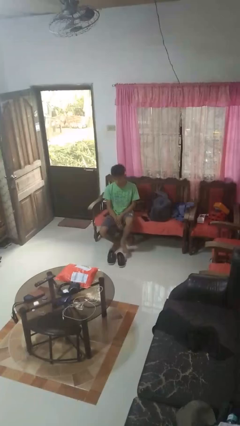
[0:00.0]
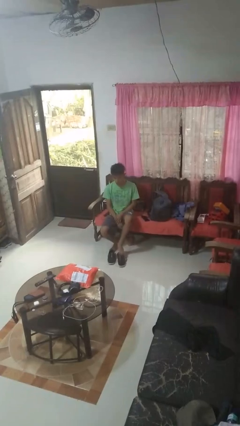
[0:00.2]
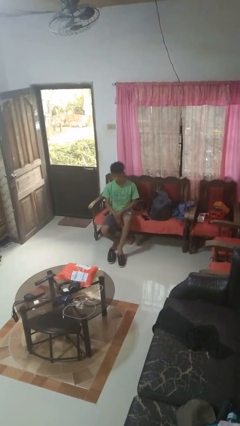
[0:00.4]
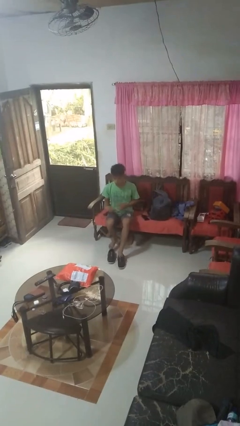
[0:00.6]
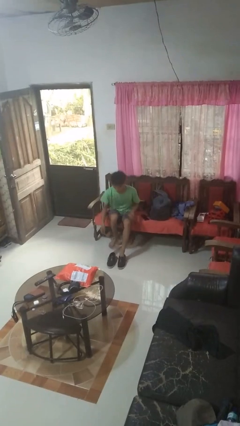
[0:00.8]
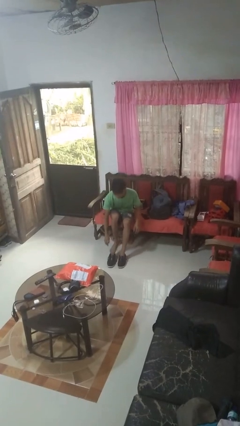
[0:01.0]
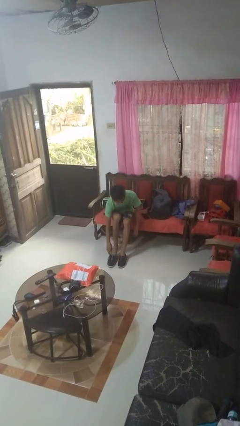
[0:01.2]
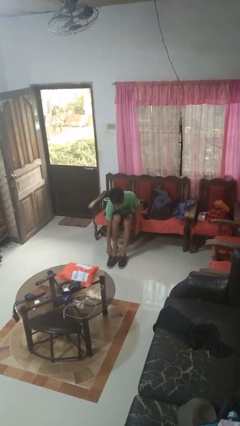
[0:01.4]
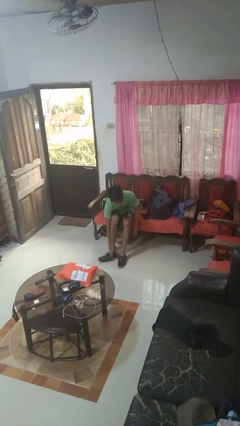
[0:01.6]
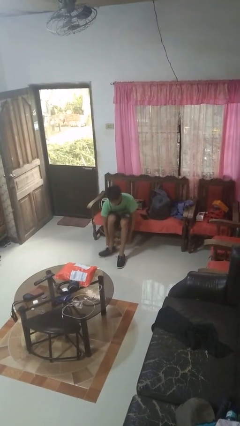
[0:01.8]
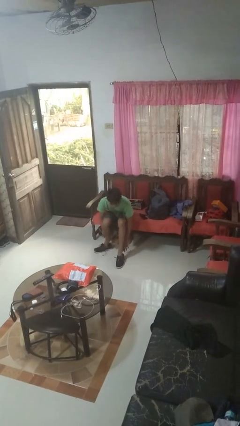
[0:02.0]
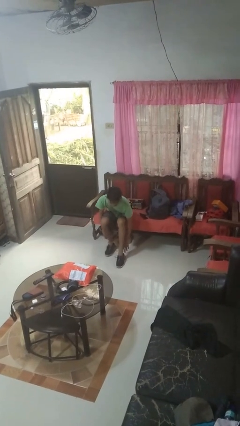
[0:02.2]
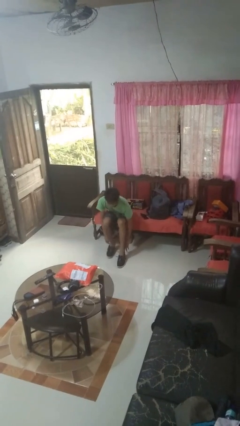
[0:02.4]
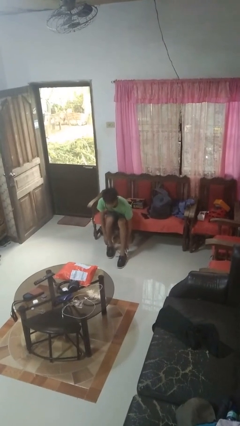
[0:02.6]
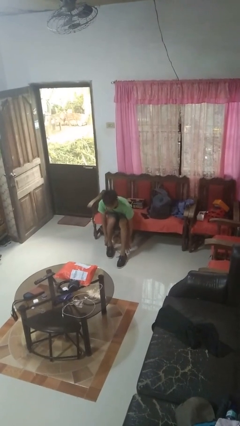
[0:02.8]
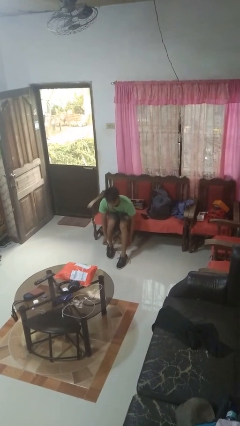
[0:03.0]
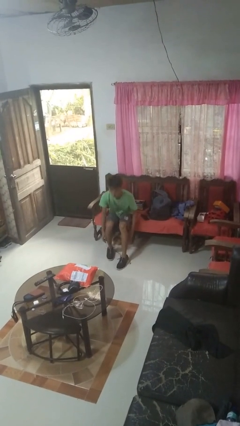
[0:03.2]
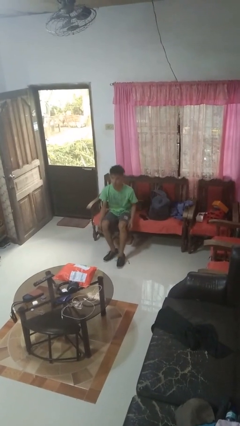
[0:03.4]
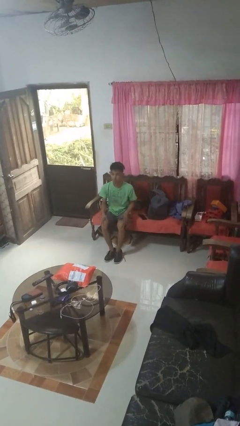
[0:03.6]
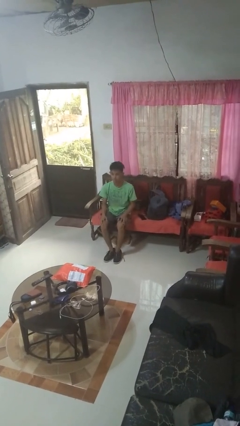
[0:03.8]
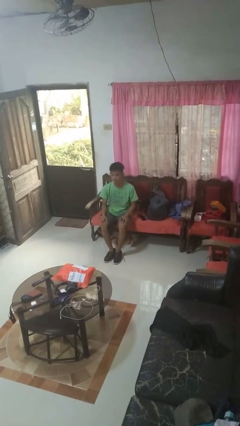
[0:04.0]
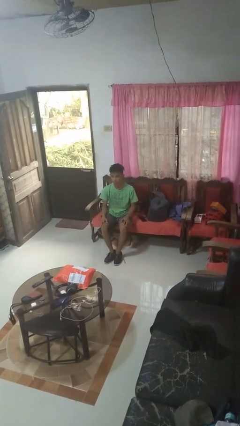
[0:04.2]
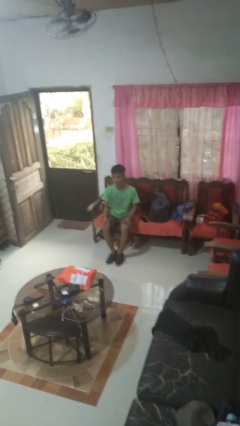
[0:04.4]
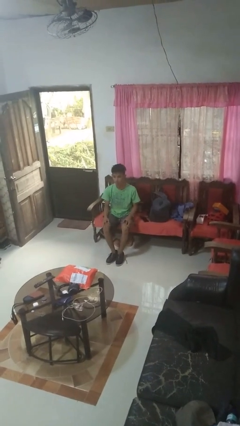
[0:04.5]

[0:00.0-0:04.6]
person puts on shoes

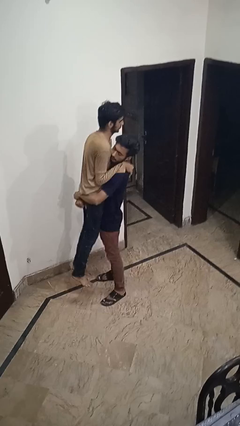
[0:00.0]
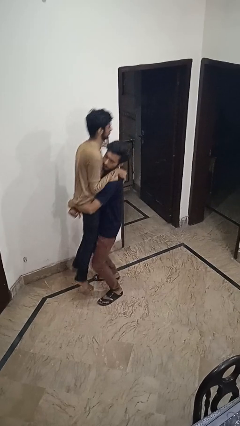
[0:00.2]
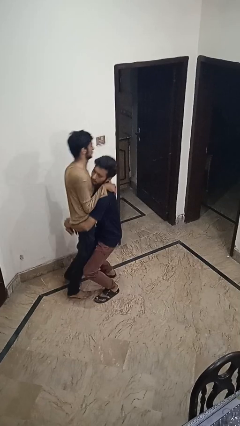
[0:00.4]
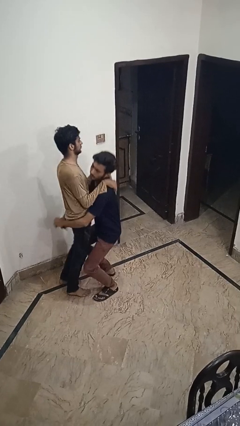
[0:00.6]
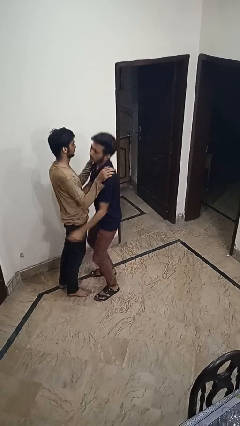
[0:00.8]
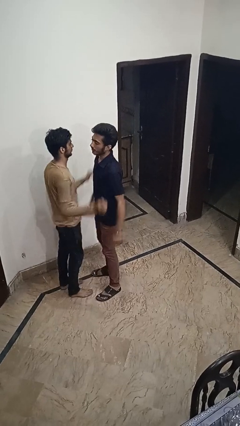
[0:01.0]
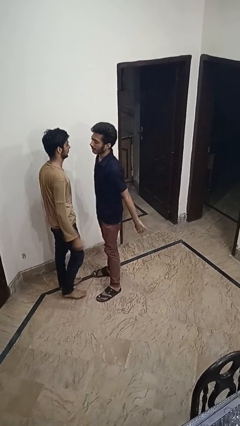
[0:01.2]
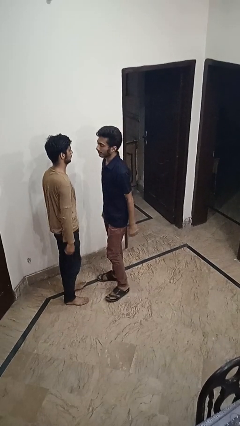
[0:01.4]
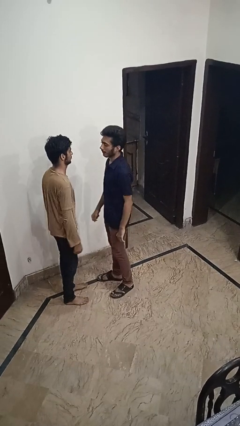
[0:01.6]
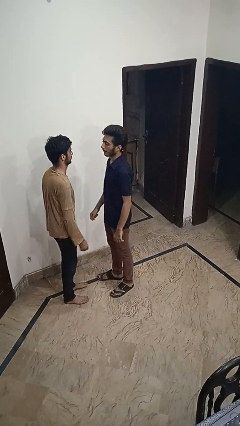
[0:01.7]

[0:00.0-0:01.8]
person puts down person

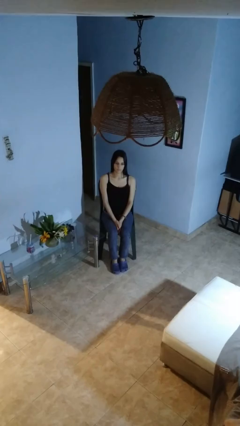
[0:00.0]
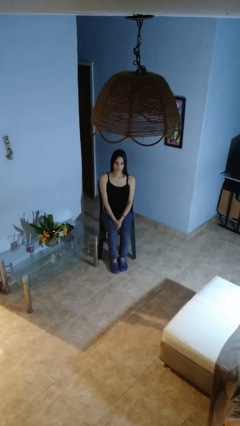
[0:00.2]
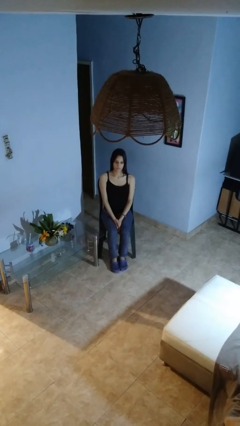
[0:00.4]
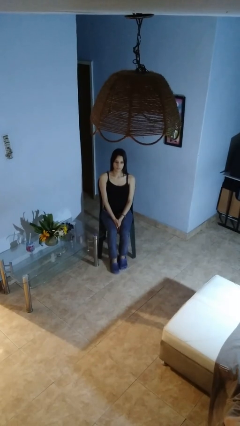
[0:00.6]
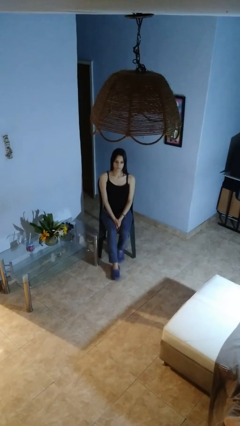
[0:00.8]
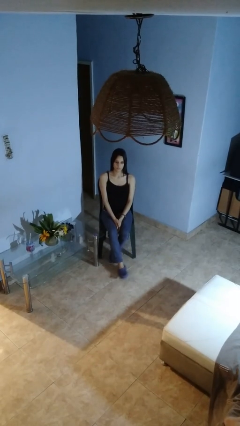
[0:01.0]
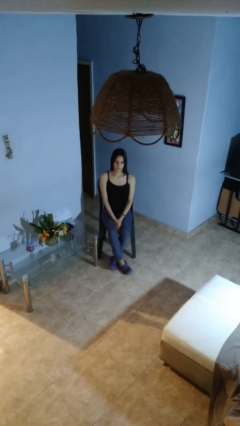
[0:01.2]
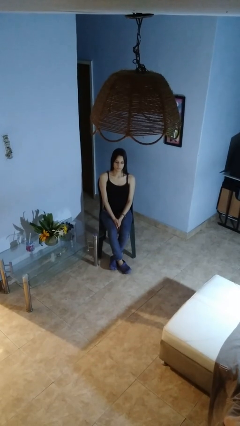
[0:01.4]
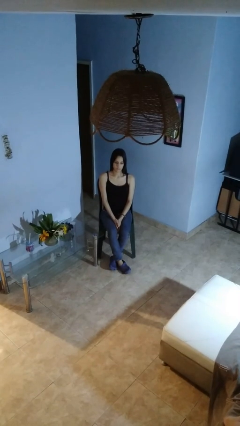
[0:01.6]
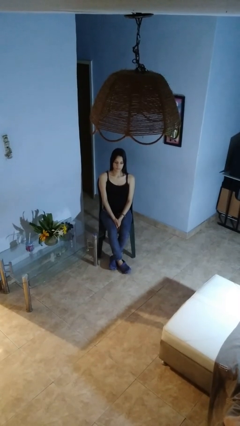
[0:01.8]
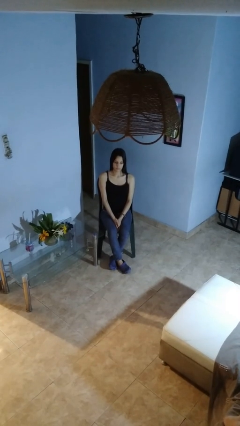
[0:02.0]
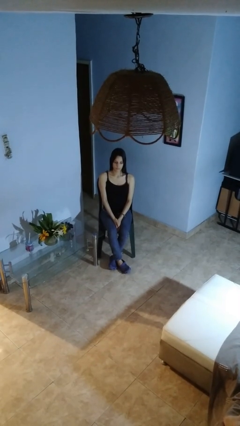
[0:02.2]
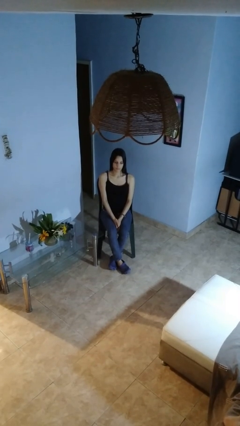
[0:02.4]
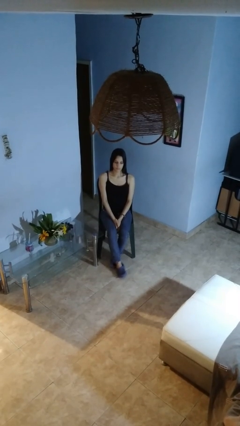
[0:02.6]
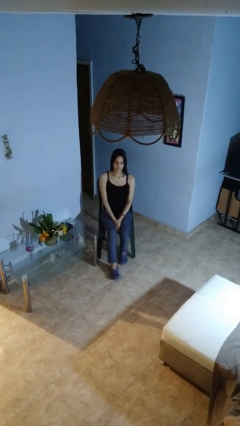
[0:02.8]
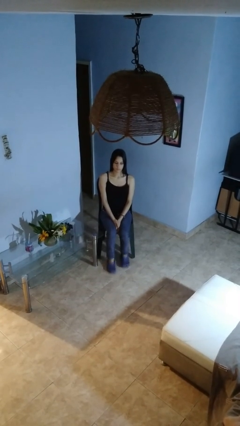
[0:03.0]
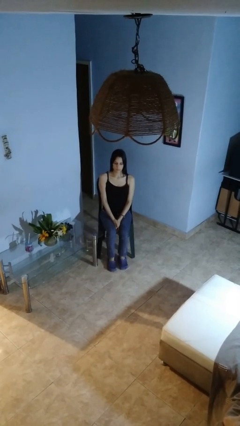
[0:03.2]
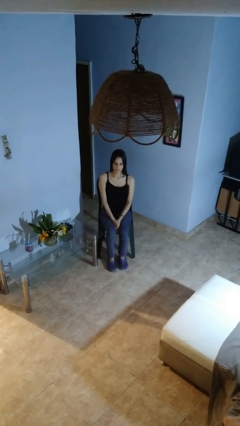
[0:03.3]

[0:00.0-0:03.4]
person crosses legs

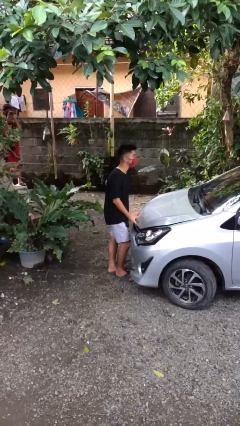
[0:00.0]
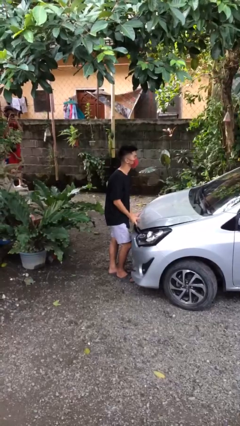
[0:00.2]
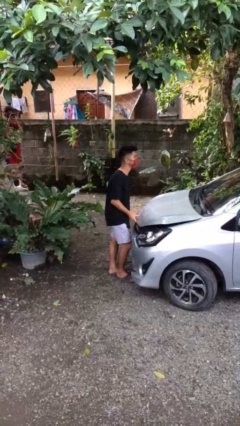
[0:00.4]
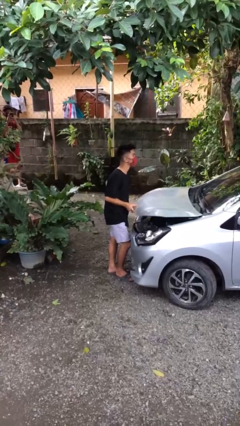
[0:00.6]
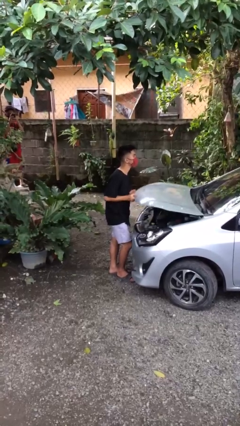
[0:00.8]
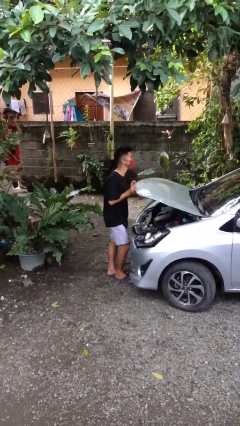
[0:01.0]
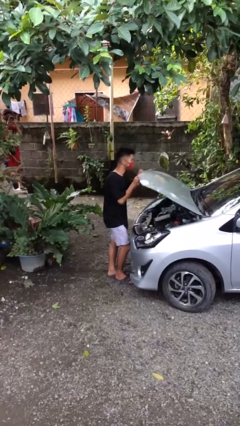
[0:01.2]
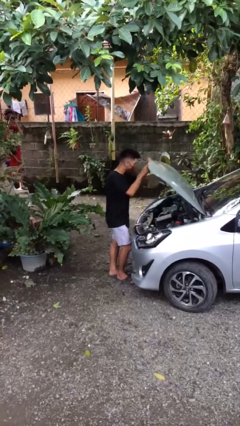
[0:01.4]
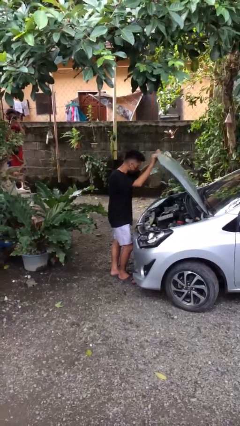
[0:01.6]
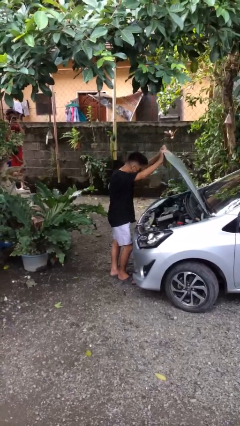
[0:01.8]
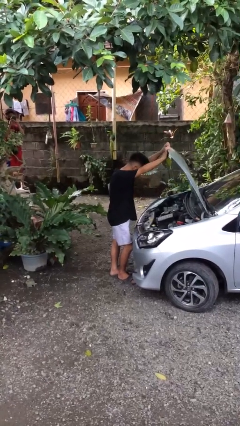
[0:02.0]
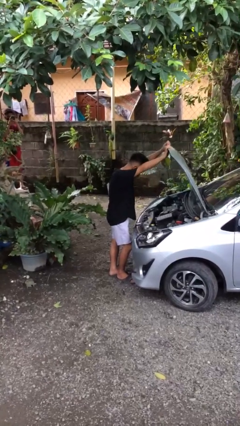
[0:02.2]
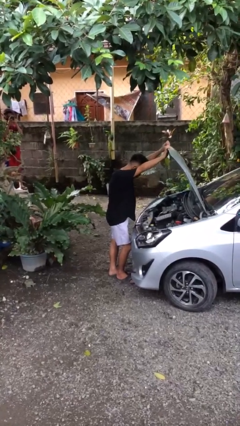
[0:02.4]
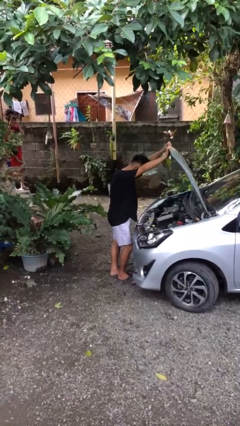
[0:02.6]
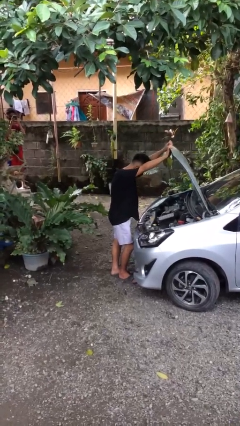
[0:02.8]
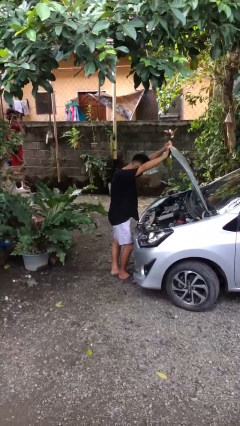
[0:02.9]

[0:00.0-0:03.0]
person opens car hood

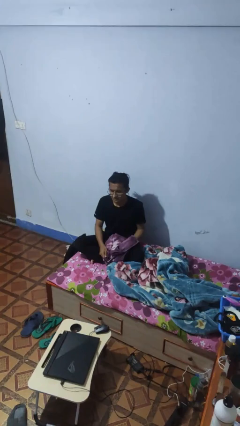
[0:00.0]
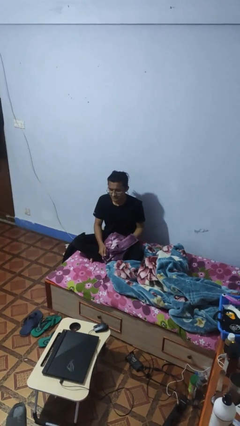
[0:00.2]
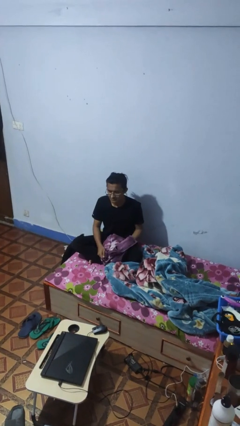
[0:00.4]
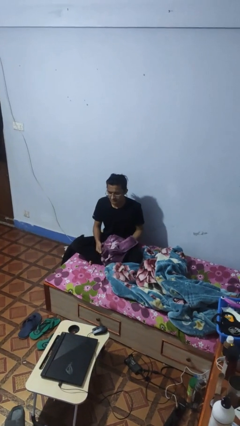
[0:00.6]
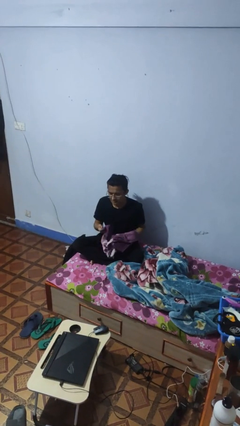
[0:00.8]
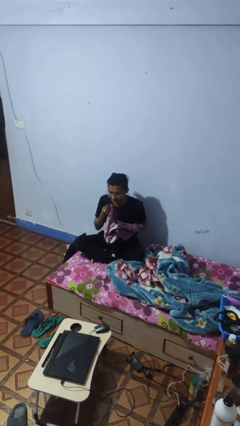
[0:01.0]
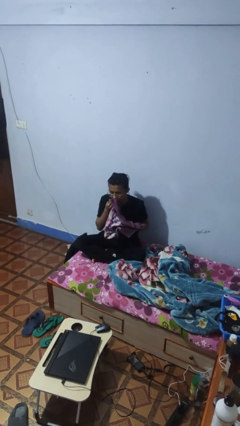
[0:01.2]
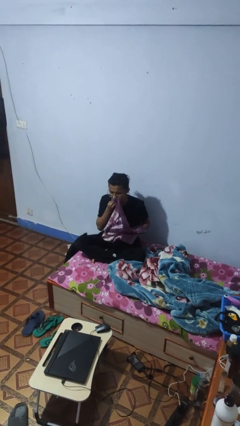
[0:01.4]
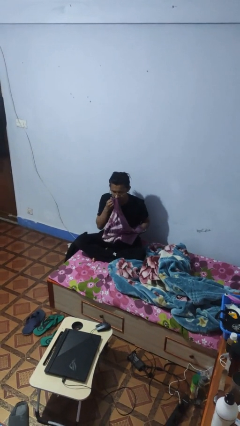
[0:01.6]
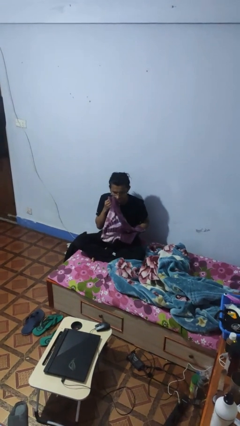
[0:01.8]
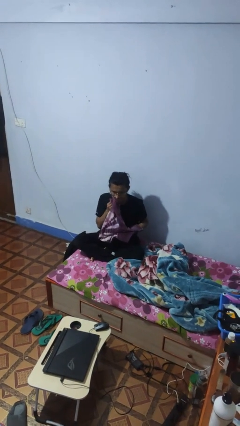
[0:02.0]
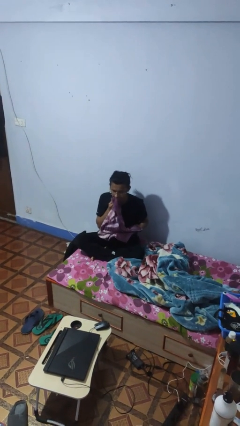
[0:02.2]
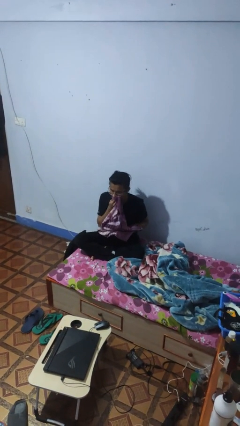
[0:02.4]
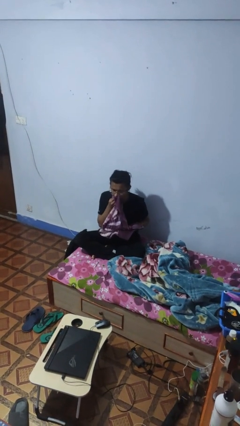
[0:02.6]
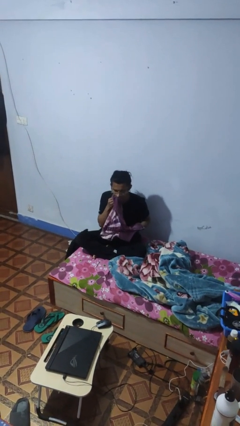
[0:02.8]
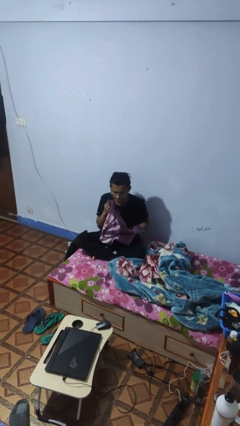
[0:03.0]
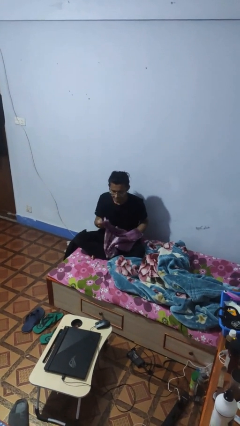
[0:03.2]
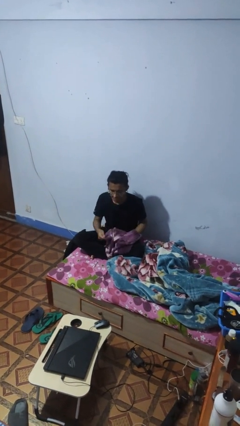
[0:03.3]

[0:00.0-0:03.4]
person wipes mouth with napkin

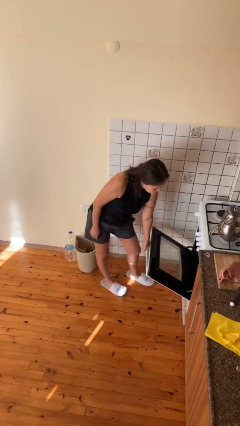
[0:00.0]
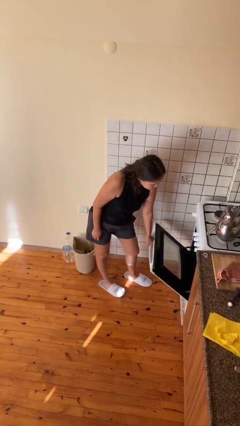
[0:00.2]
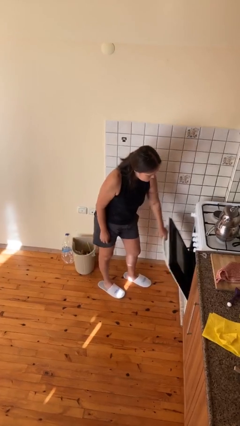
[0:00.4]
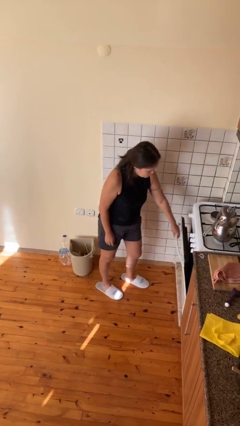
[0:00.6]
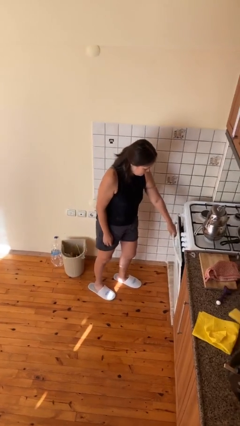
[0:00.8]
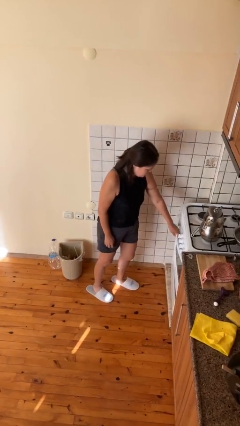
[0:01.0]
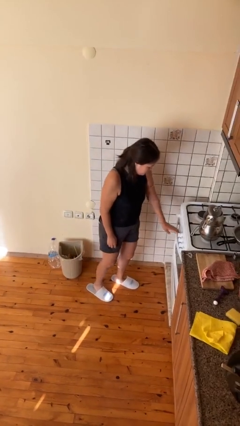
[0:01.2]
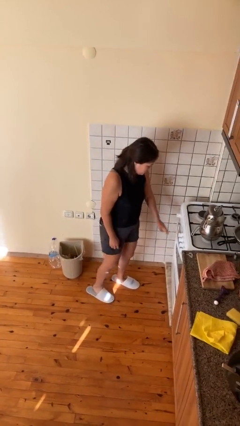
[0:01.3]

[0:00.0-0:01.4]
person closes oven door
